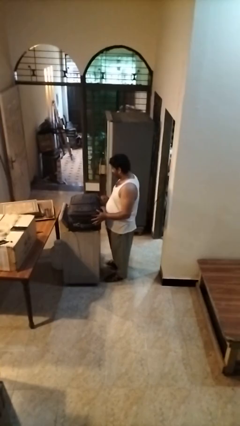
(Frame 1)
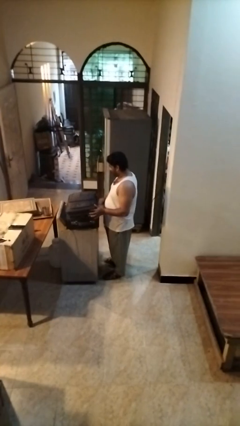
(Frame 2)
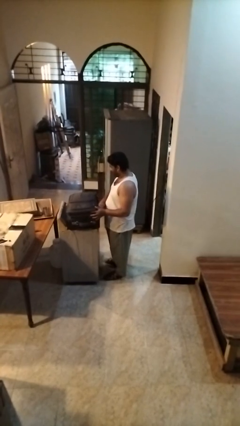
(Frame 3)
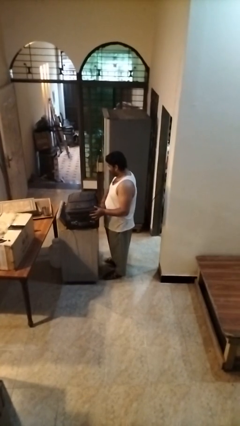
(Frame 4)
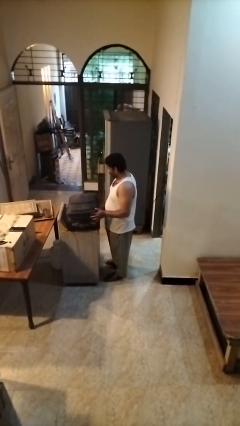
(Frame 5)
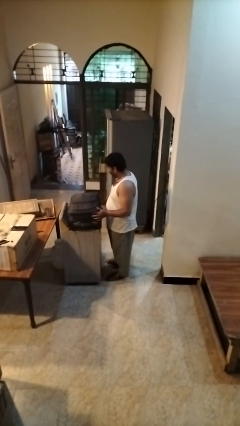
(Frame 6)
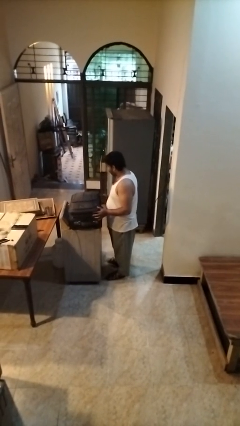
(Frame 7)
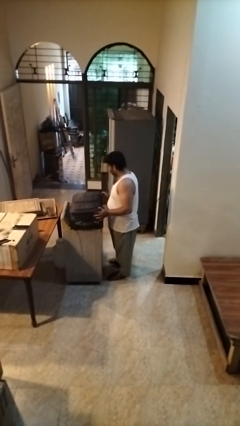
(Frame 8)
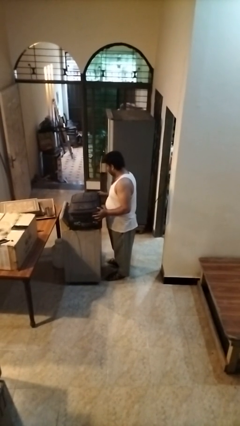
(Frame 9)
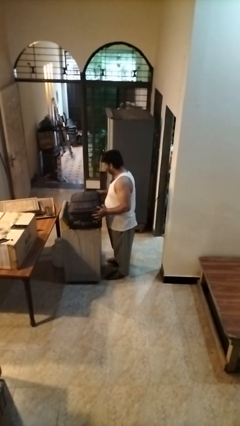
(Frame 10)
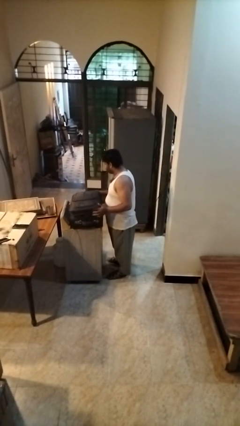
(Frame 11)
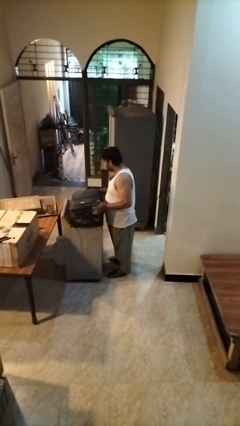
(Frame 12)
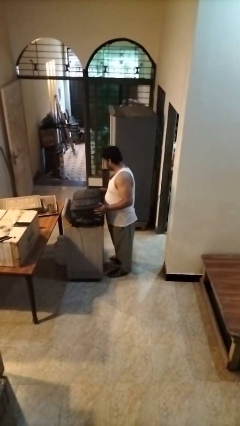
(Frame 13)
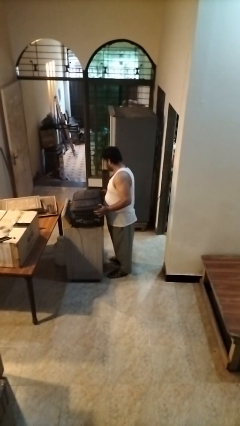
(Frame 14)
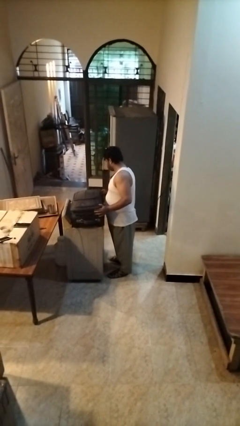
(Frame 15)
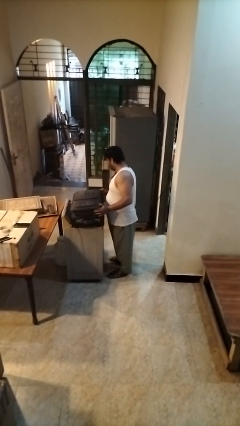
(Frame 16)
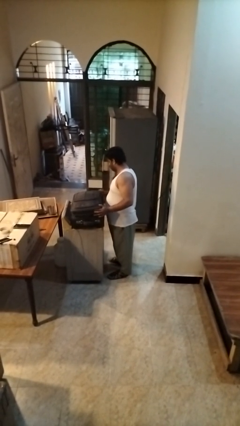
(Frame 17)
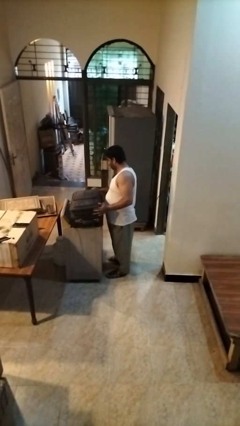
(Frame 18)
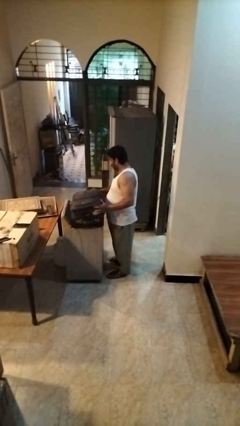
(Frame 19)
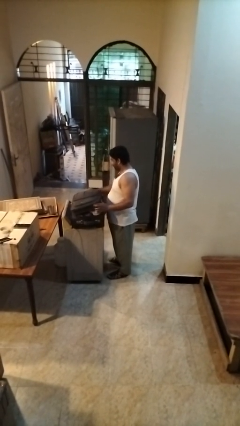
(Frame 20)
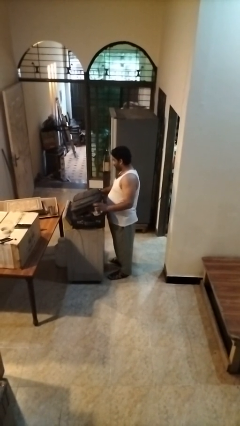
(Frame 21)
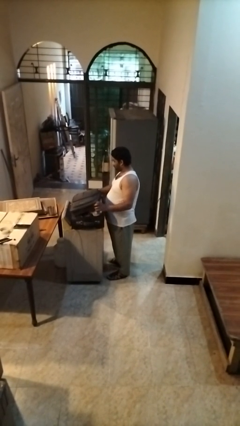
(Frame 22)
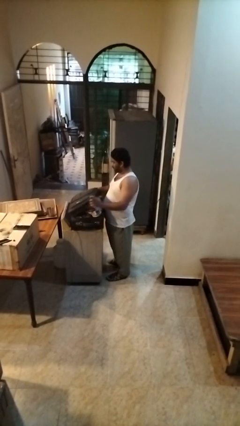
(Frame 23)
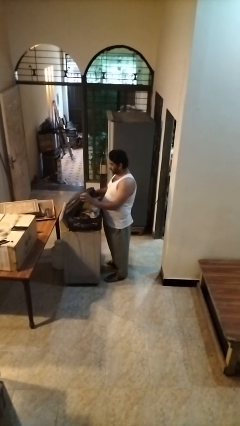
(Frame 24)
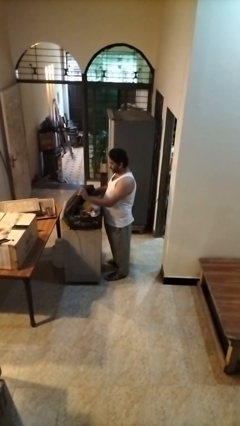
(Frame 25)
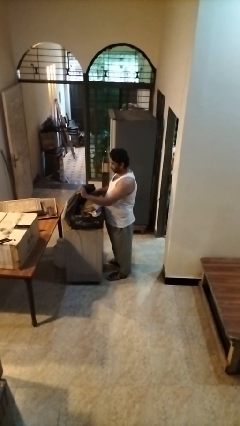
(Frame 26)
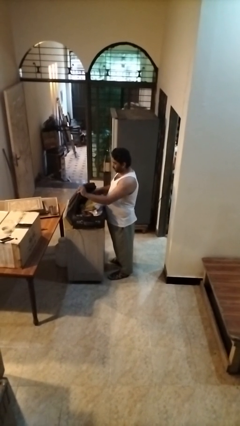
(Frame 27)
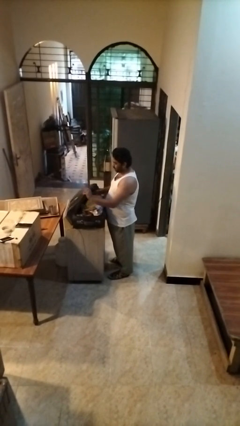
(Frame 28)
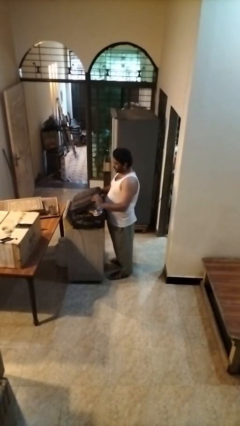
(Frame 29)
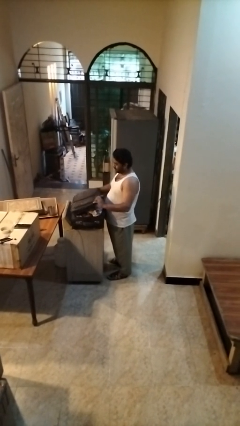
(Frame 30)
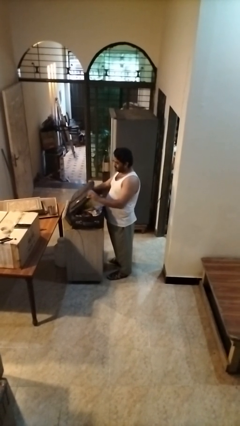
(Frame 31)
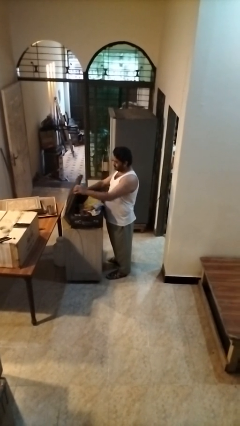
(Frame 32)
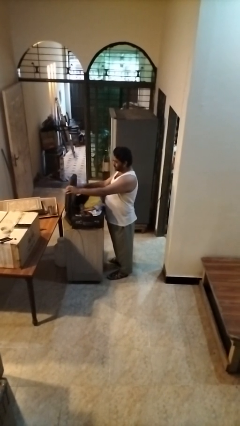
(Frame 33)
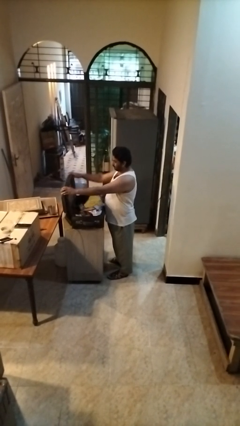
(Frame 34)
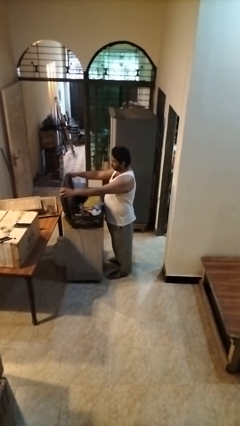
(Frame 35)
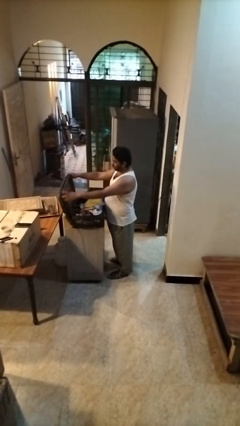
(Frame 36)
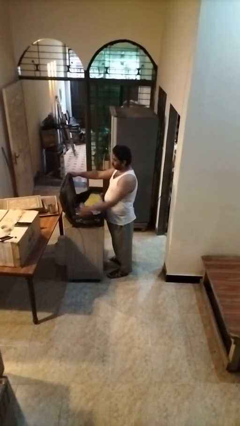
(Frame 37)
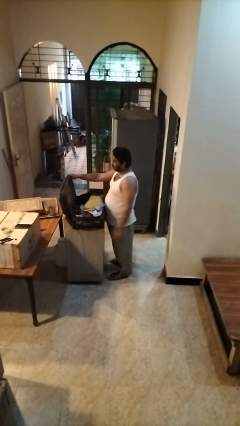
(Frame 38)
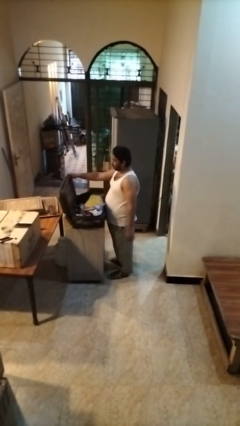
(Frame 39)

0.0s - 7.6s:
person opens suitcase

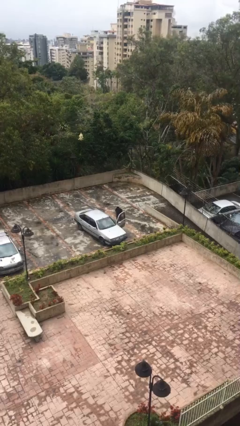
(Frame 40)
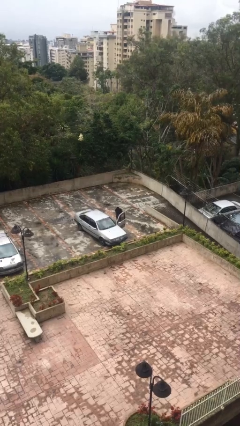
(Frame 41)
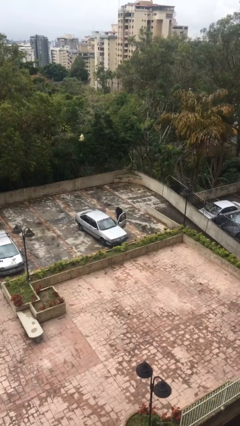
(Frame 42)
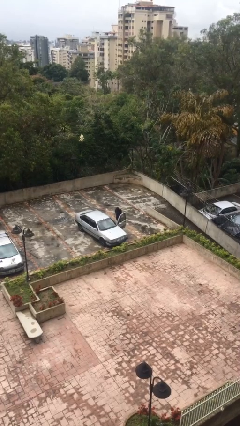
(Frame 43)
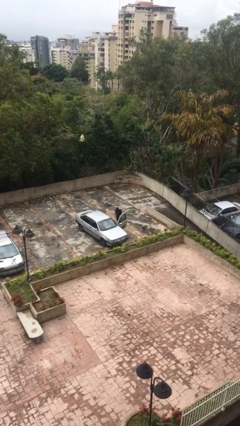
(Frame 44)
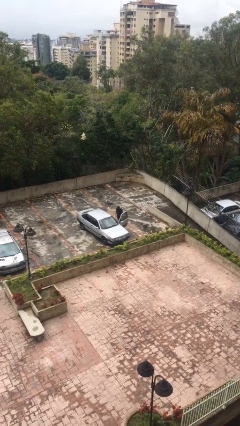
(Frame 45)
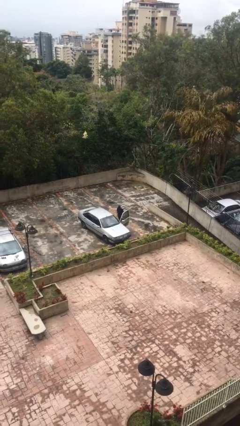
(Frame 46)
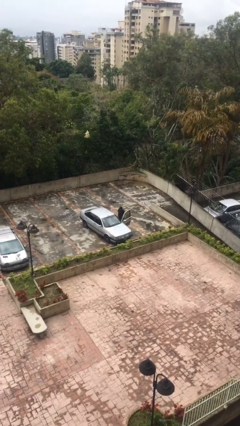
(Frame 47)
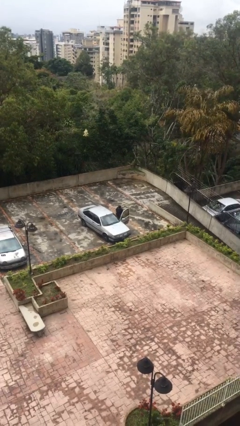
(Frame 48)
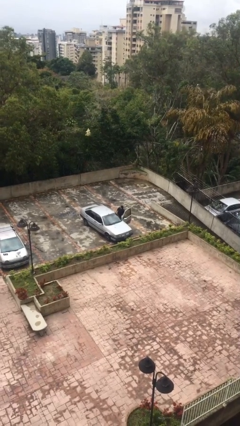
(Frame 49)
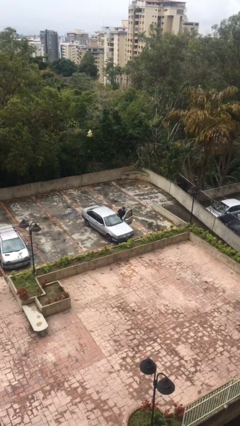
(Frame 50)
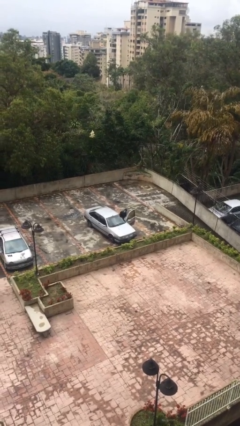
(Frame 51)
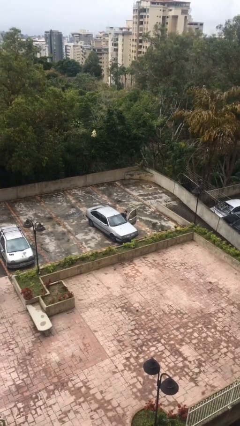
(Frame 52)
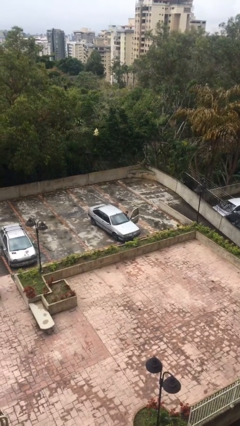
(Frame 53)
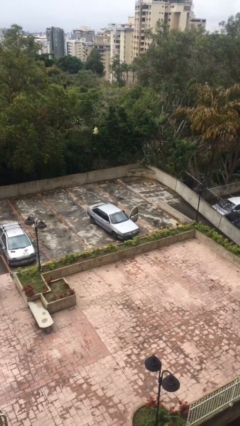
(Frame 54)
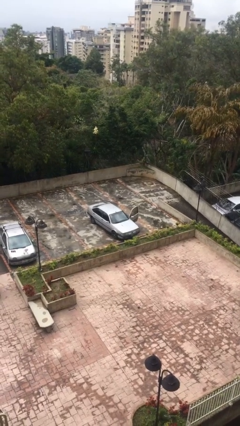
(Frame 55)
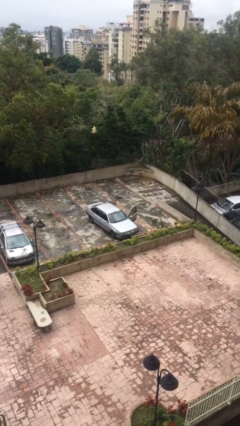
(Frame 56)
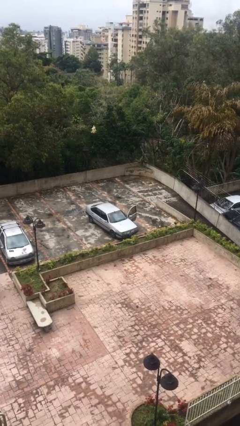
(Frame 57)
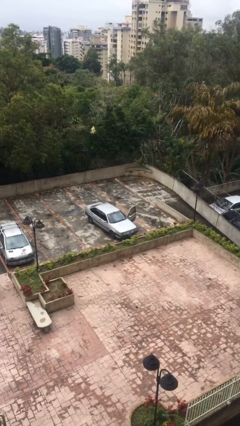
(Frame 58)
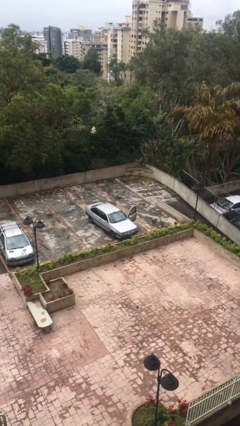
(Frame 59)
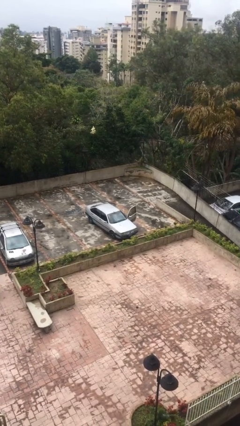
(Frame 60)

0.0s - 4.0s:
person enters car

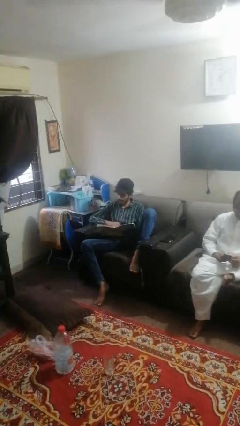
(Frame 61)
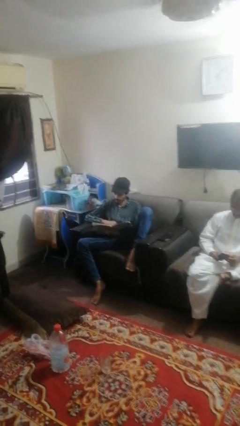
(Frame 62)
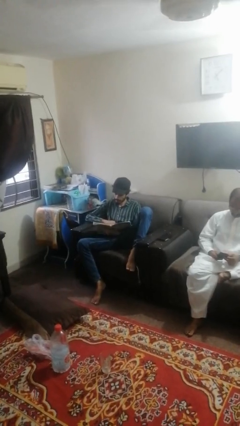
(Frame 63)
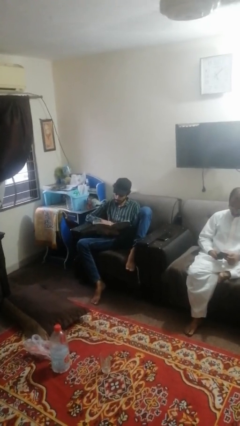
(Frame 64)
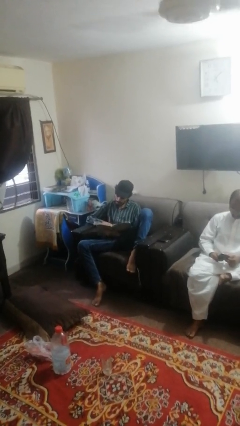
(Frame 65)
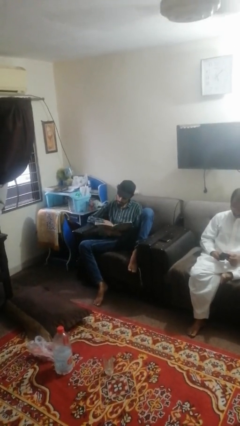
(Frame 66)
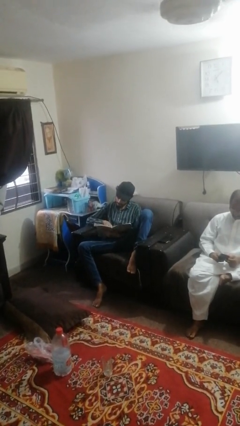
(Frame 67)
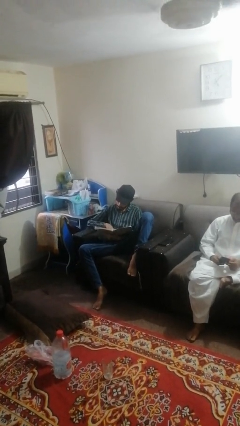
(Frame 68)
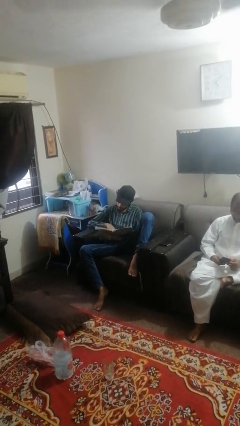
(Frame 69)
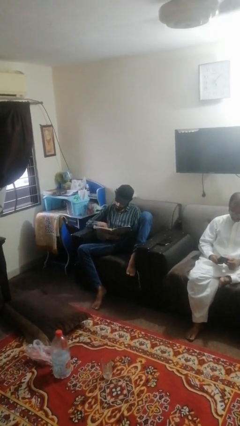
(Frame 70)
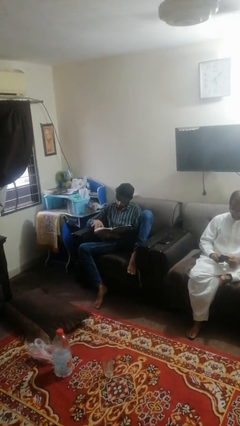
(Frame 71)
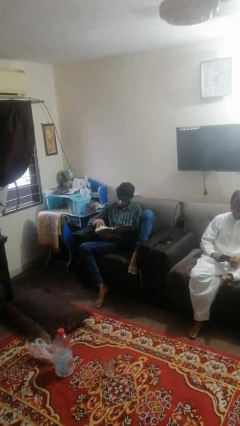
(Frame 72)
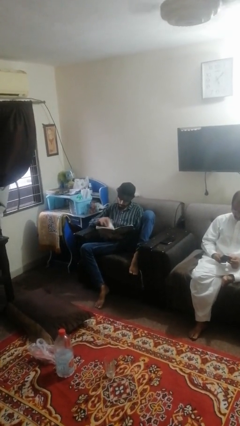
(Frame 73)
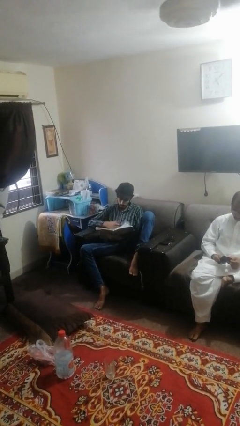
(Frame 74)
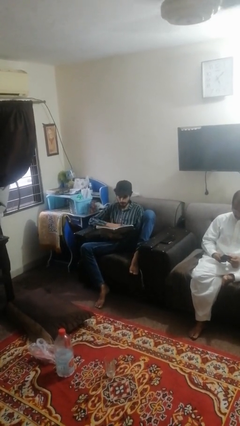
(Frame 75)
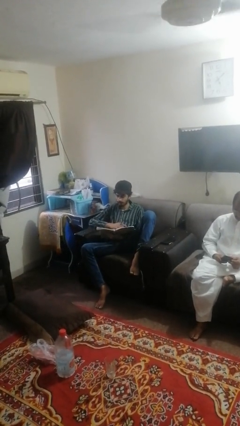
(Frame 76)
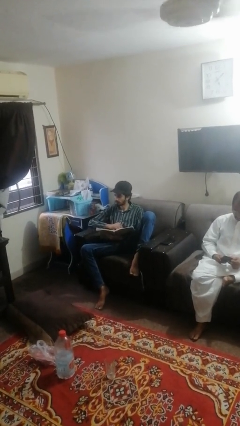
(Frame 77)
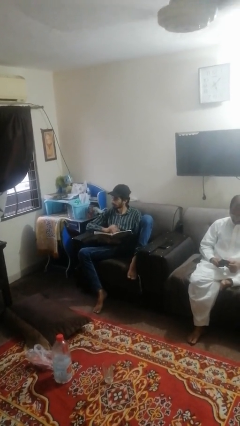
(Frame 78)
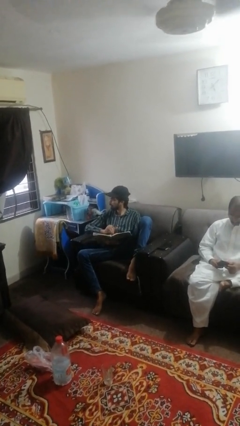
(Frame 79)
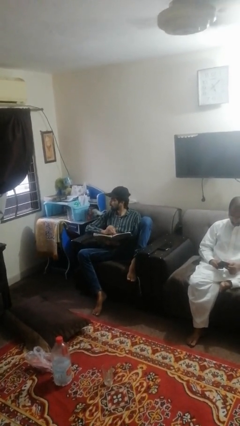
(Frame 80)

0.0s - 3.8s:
person reads magazine

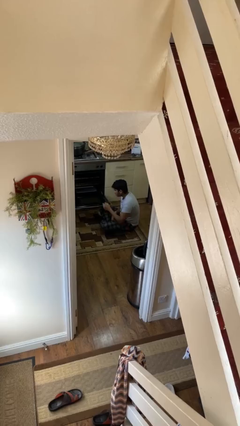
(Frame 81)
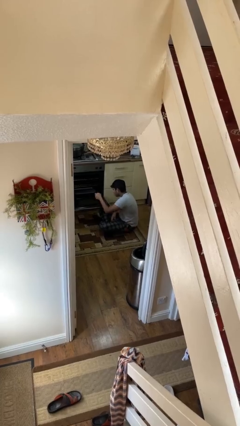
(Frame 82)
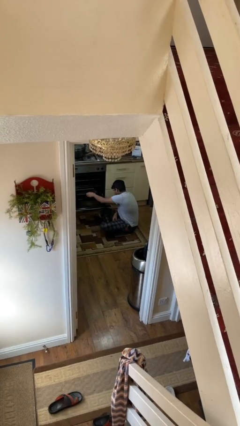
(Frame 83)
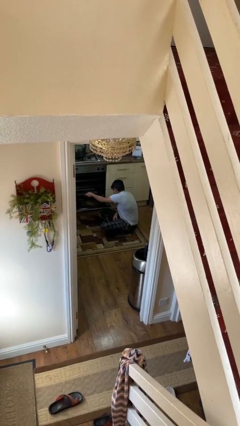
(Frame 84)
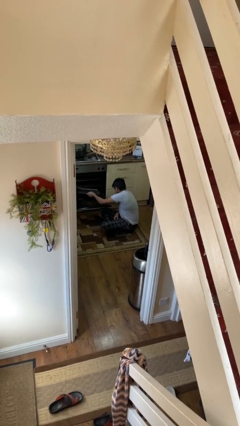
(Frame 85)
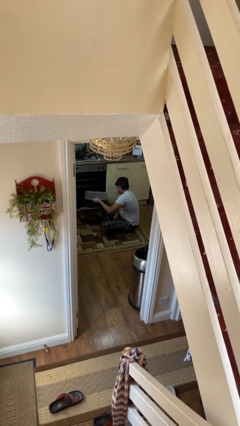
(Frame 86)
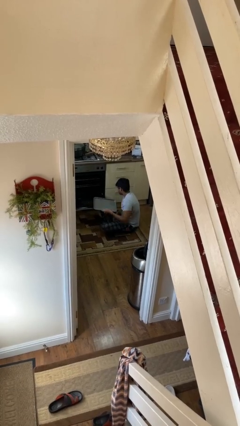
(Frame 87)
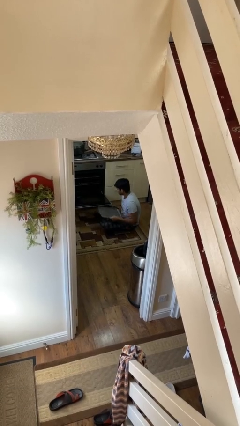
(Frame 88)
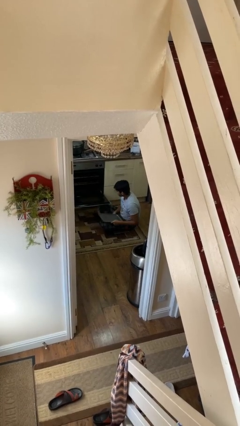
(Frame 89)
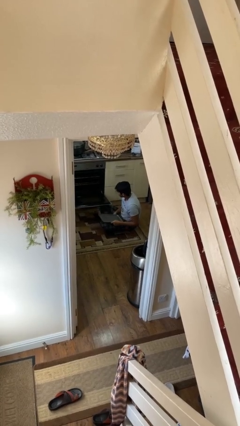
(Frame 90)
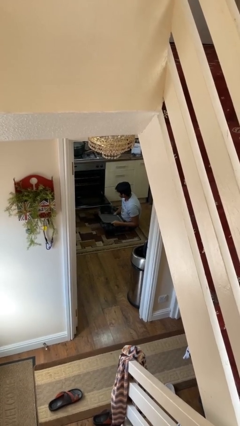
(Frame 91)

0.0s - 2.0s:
person takes object from oven

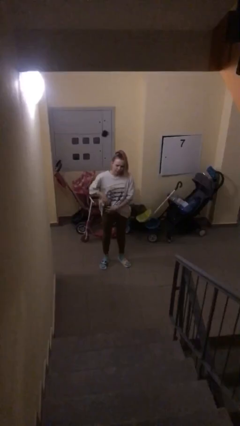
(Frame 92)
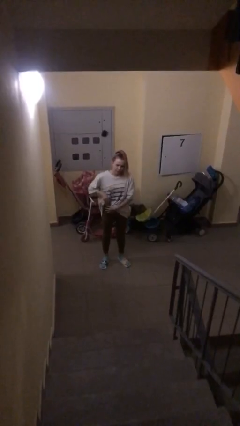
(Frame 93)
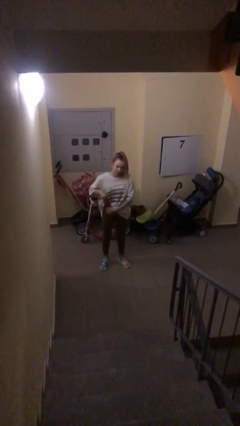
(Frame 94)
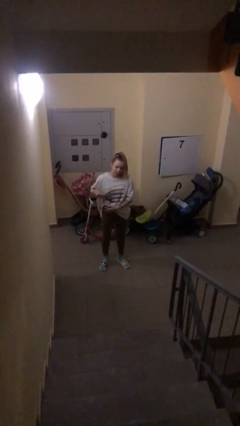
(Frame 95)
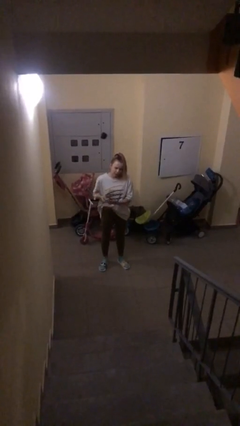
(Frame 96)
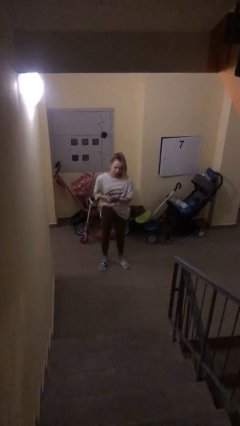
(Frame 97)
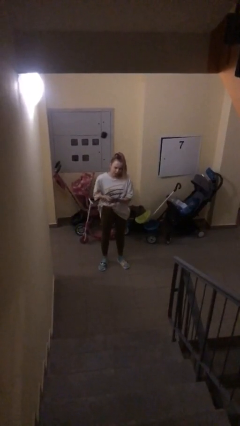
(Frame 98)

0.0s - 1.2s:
person takes phone from pocket
